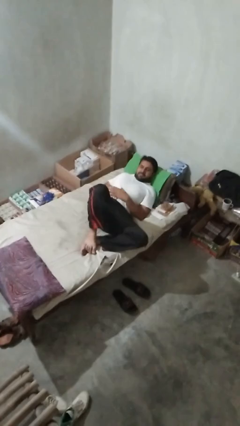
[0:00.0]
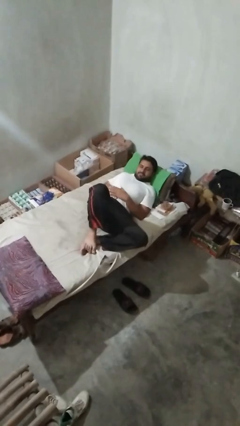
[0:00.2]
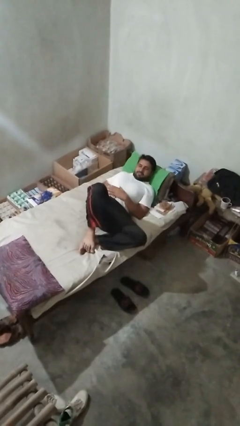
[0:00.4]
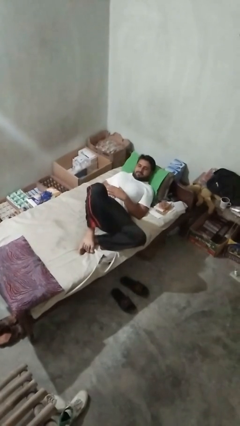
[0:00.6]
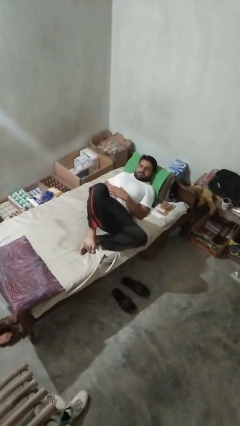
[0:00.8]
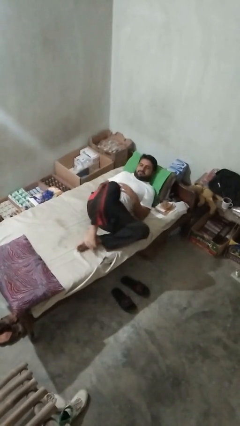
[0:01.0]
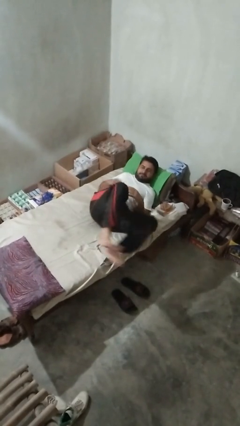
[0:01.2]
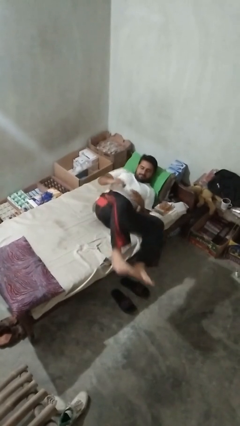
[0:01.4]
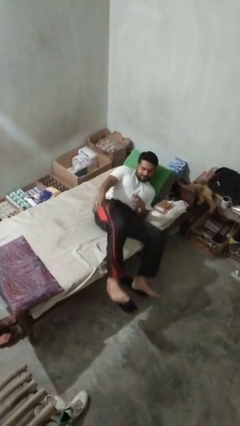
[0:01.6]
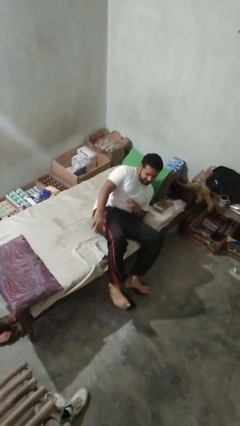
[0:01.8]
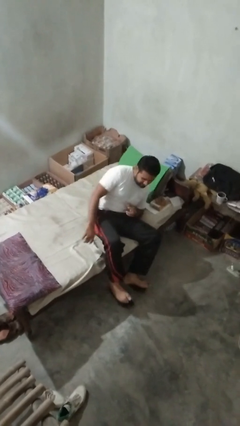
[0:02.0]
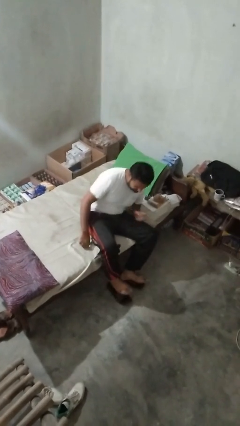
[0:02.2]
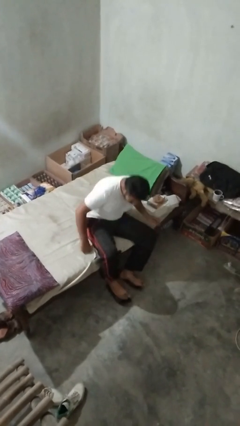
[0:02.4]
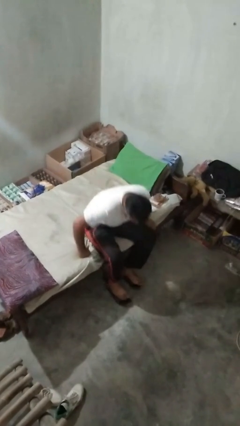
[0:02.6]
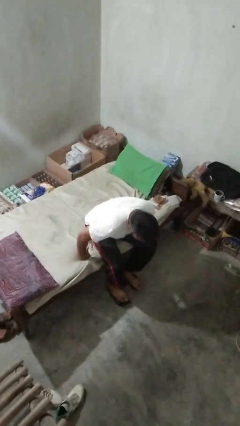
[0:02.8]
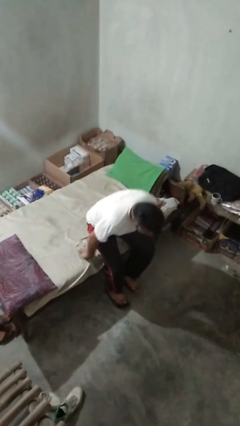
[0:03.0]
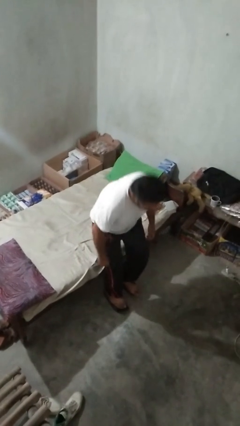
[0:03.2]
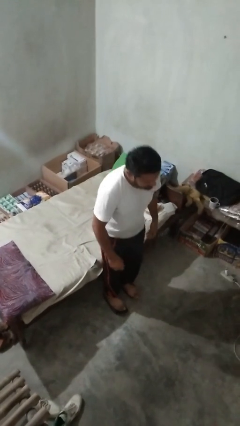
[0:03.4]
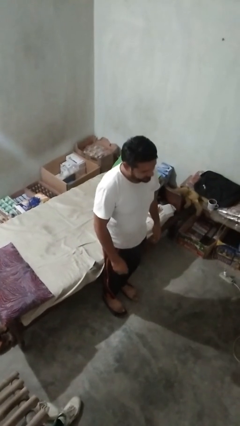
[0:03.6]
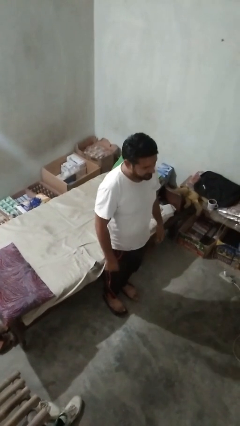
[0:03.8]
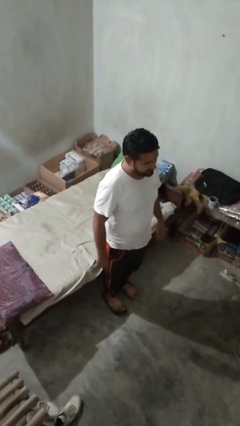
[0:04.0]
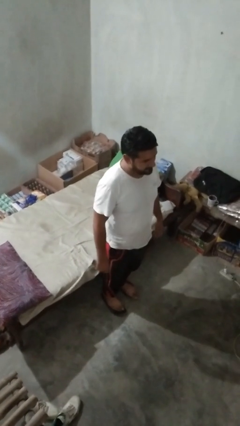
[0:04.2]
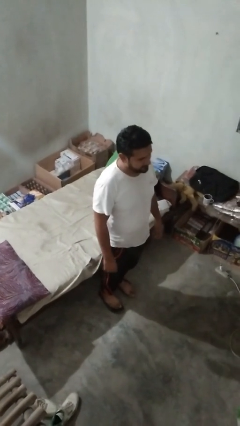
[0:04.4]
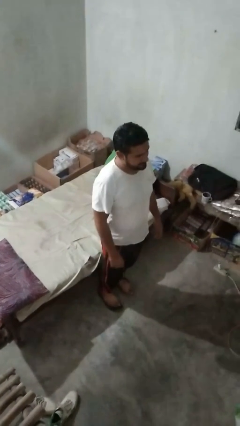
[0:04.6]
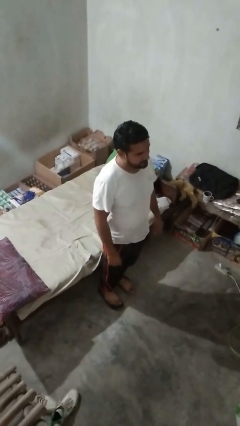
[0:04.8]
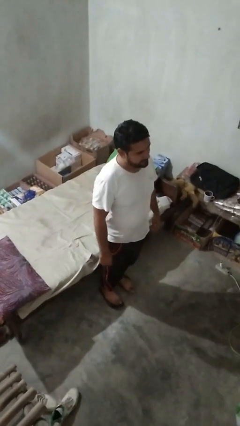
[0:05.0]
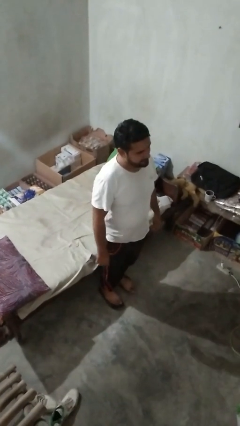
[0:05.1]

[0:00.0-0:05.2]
person stands up

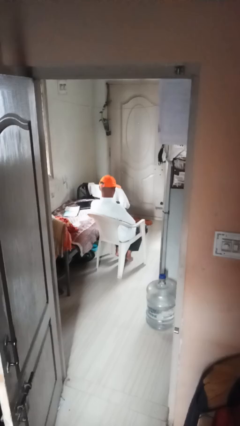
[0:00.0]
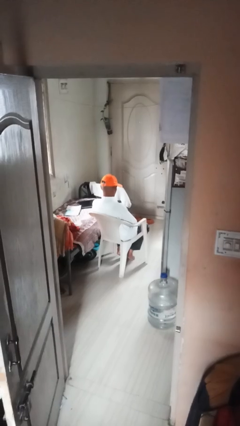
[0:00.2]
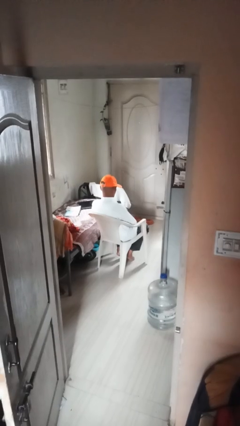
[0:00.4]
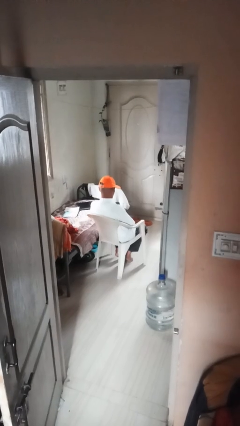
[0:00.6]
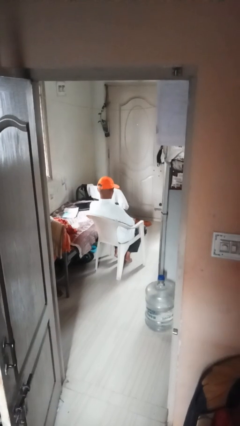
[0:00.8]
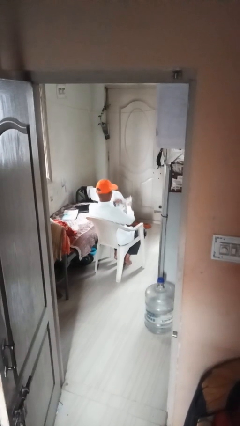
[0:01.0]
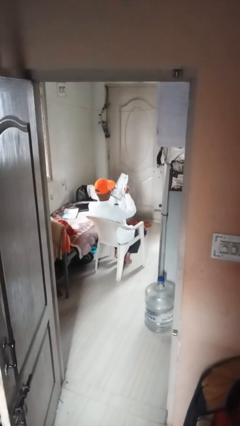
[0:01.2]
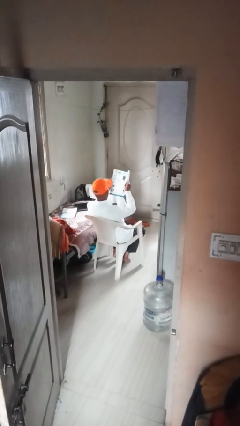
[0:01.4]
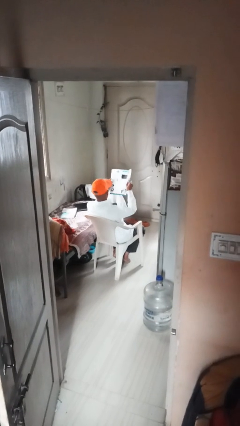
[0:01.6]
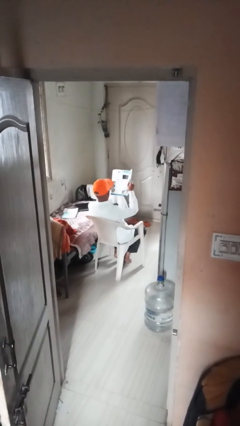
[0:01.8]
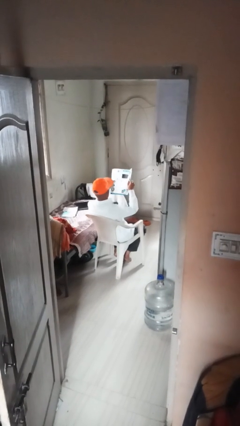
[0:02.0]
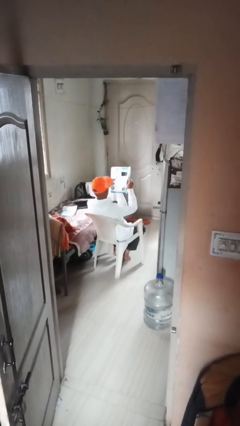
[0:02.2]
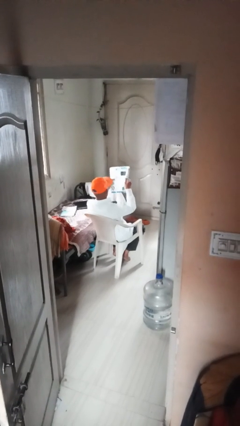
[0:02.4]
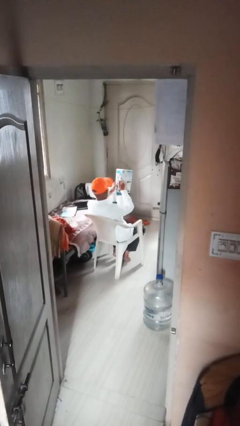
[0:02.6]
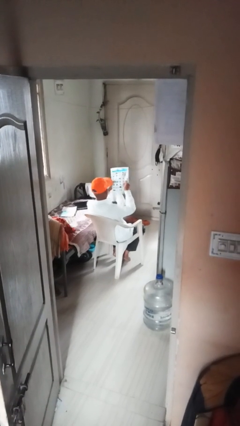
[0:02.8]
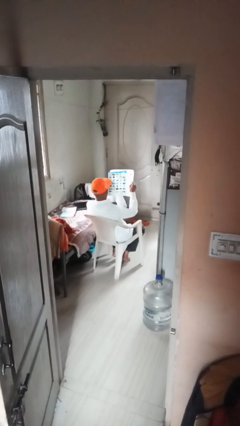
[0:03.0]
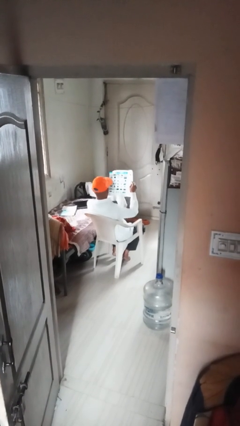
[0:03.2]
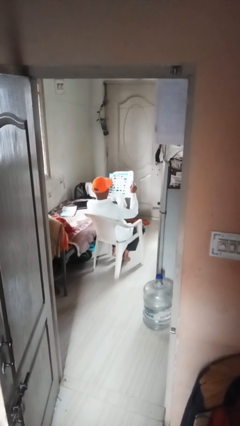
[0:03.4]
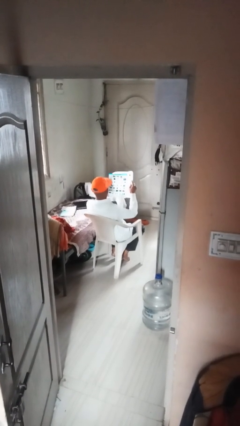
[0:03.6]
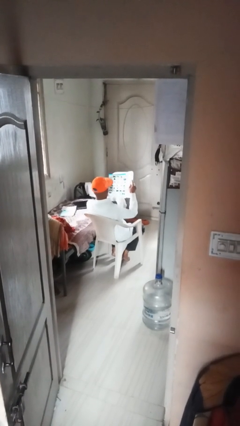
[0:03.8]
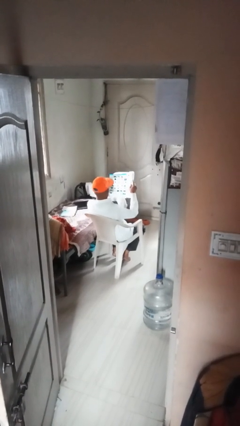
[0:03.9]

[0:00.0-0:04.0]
person reads magazine

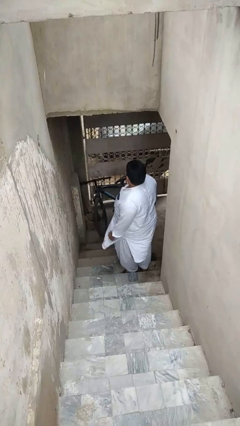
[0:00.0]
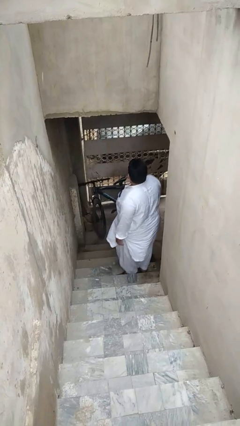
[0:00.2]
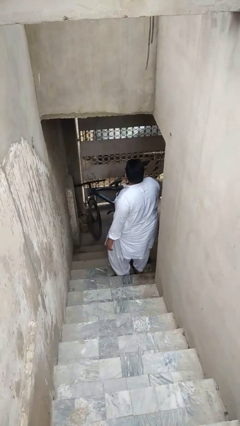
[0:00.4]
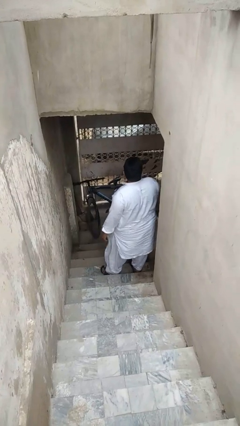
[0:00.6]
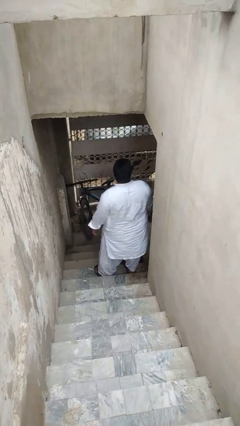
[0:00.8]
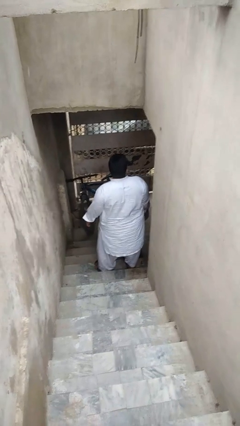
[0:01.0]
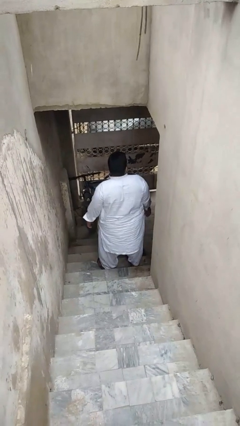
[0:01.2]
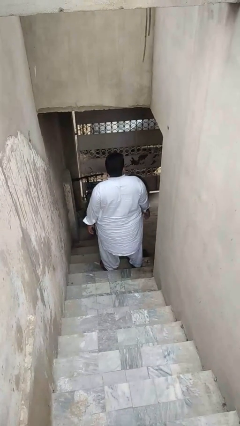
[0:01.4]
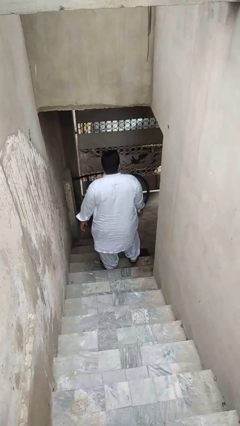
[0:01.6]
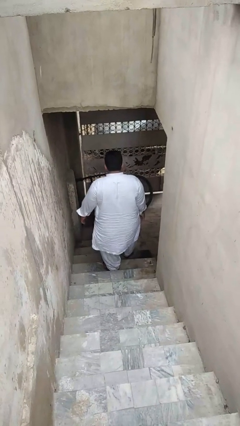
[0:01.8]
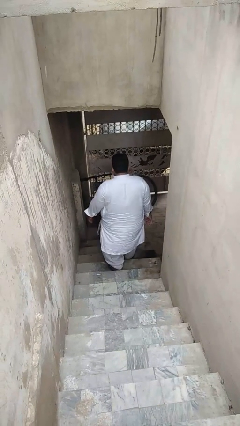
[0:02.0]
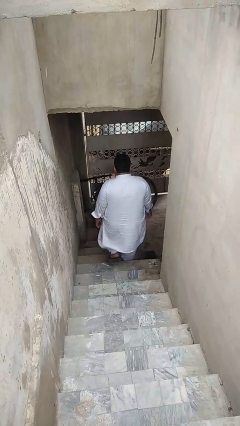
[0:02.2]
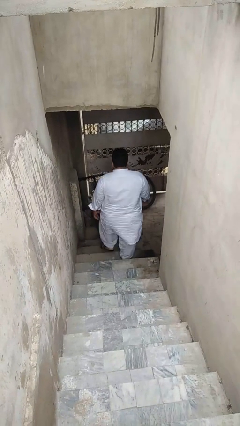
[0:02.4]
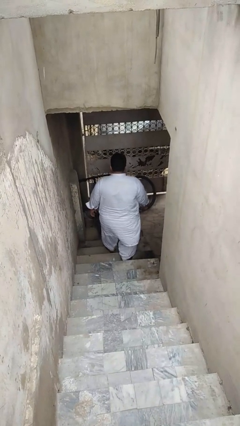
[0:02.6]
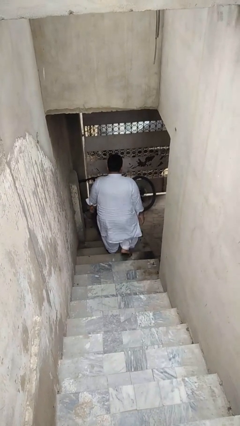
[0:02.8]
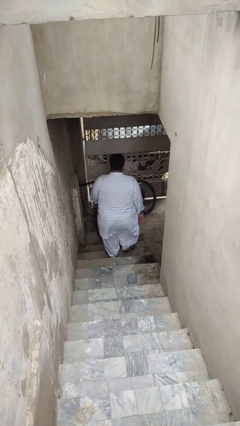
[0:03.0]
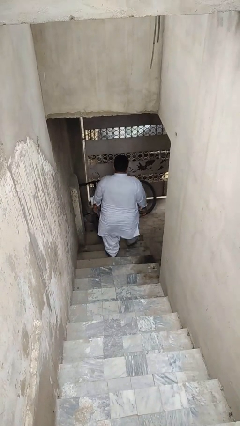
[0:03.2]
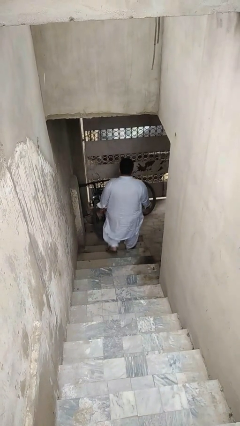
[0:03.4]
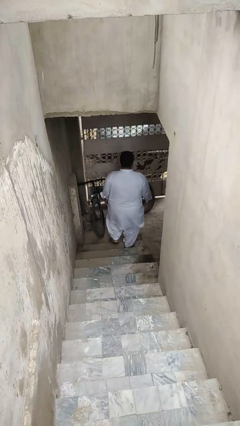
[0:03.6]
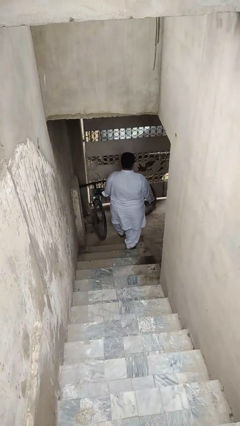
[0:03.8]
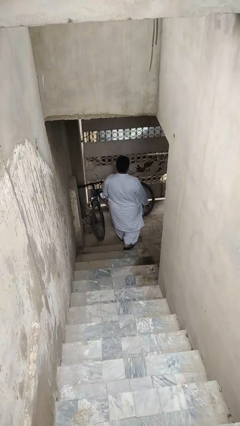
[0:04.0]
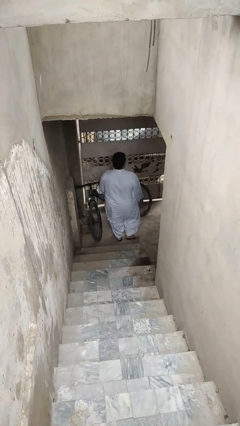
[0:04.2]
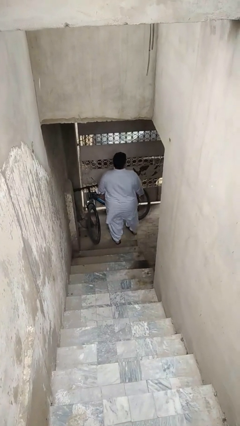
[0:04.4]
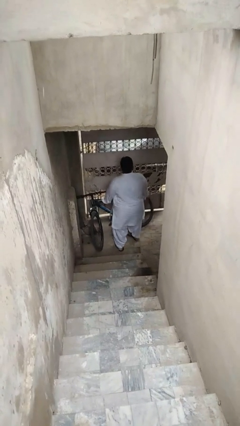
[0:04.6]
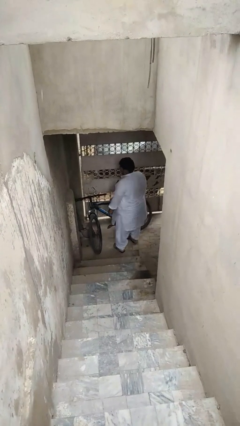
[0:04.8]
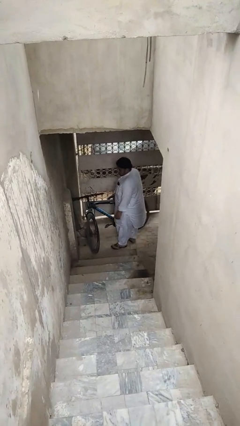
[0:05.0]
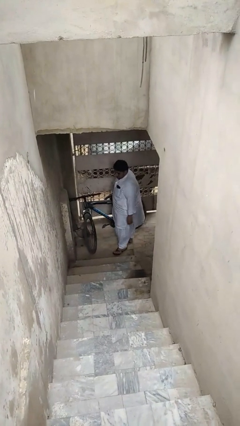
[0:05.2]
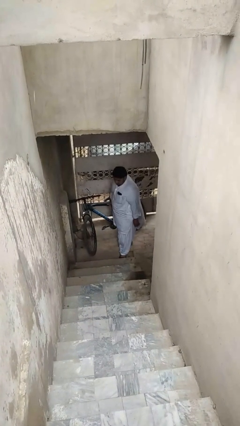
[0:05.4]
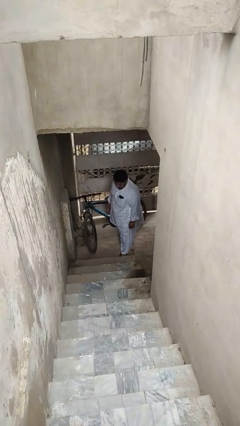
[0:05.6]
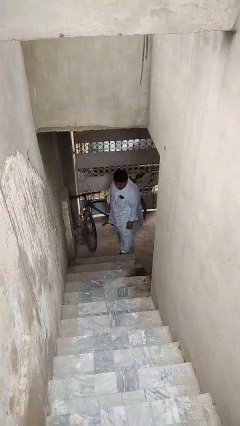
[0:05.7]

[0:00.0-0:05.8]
person climbs down stairs

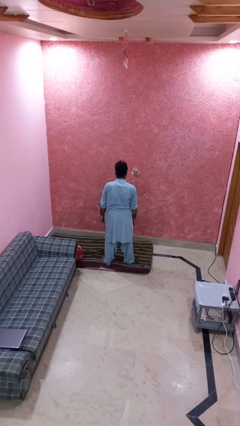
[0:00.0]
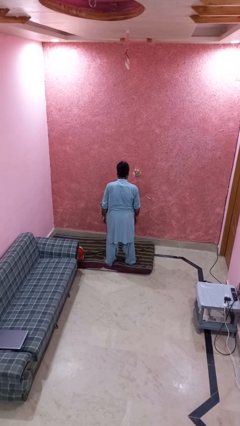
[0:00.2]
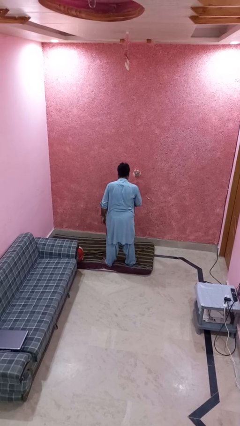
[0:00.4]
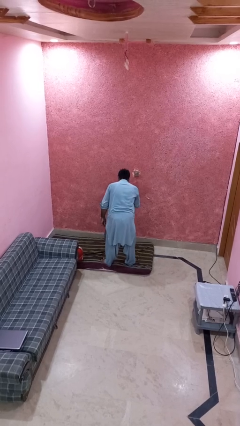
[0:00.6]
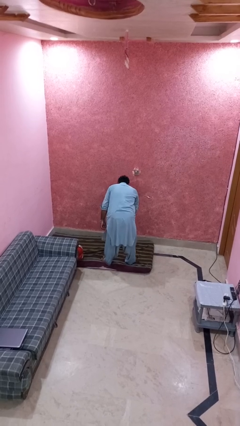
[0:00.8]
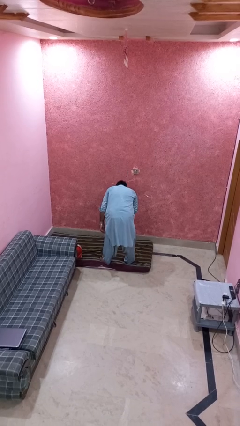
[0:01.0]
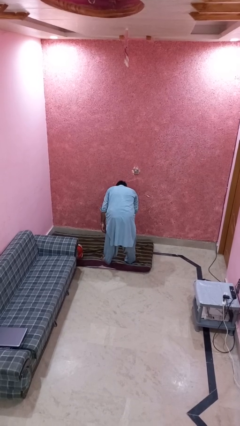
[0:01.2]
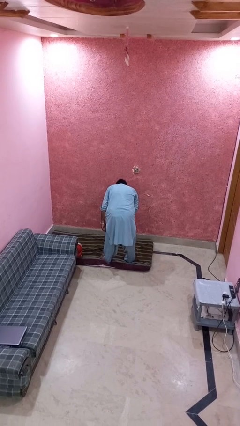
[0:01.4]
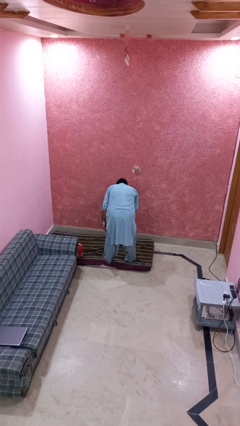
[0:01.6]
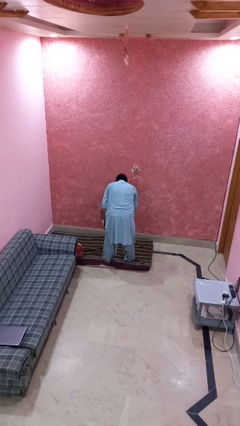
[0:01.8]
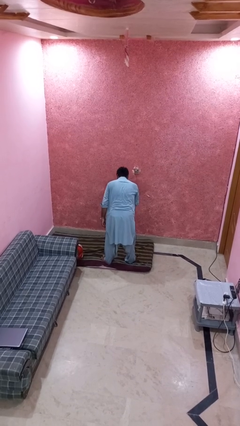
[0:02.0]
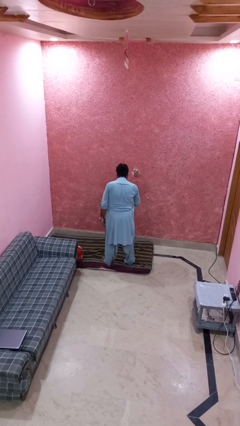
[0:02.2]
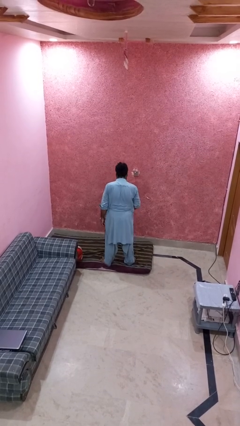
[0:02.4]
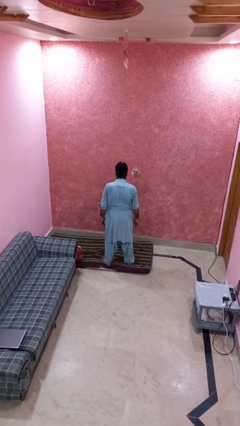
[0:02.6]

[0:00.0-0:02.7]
person bows

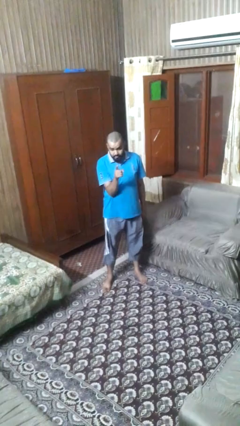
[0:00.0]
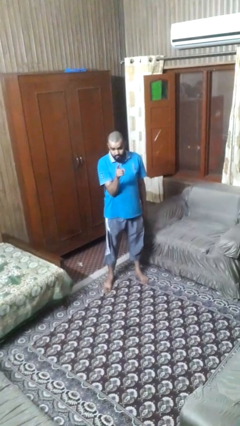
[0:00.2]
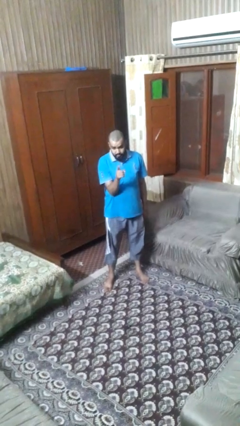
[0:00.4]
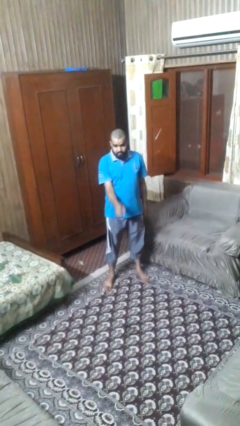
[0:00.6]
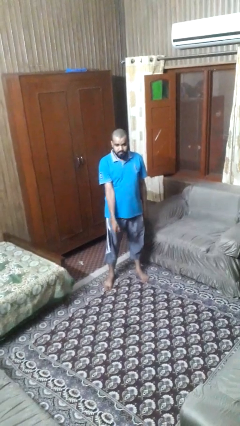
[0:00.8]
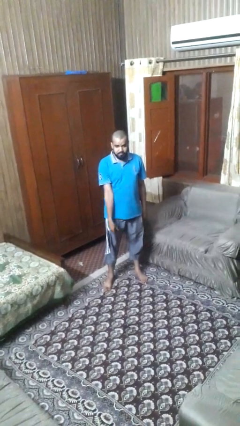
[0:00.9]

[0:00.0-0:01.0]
person points at person
